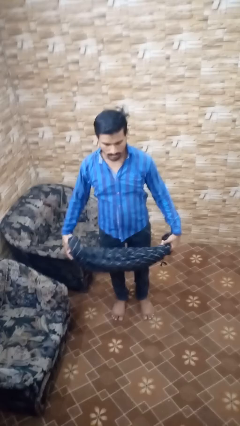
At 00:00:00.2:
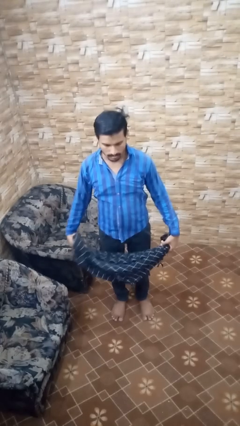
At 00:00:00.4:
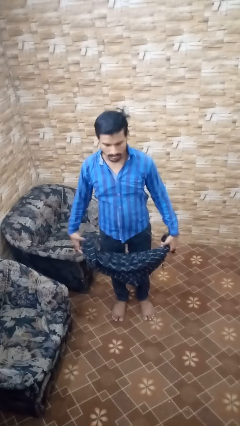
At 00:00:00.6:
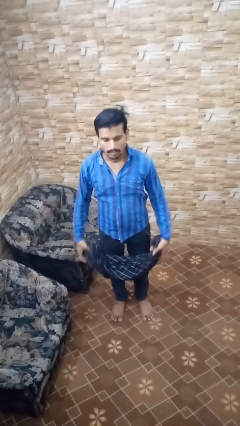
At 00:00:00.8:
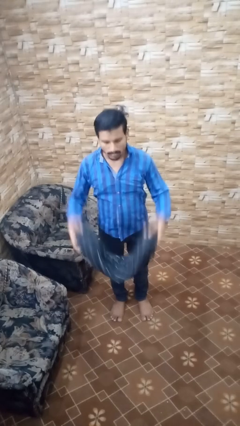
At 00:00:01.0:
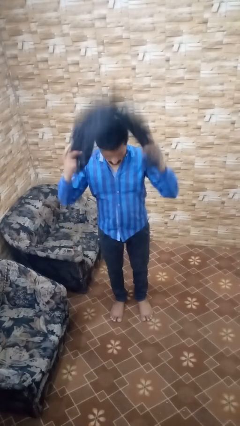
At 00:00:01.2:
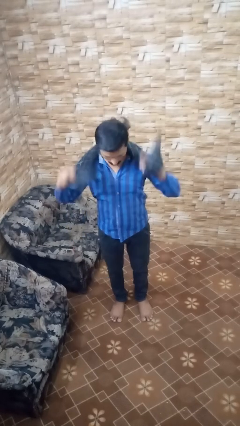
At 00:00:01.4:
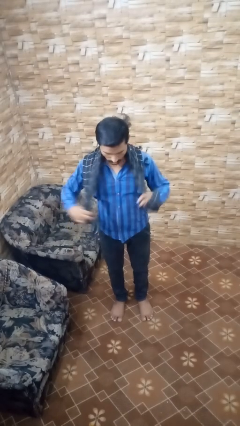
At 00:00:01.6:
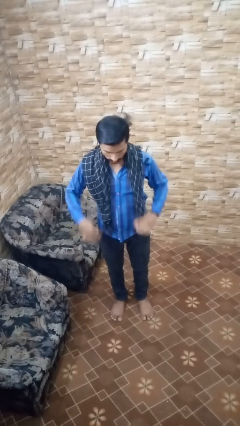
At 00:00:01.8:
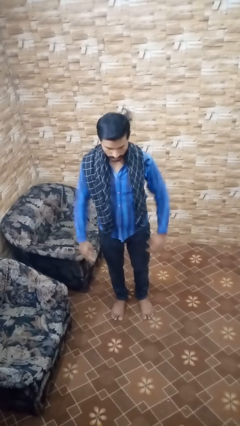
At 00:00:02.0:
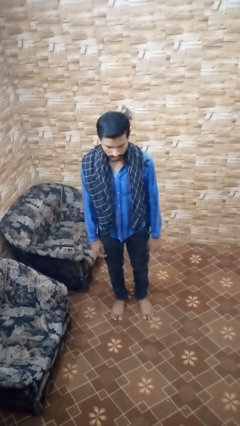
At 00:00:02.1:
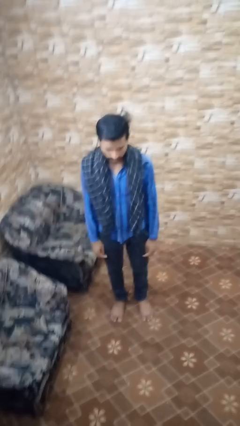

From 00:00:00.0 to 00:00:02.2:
person puts on scarf

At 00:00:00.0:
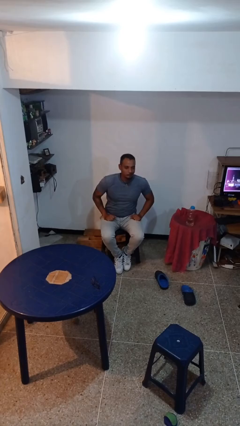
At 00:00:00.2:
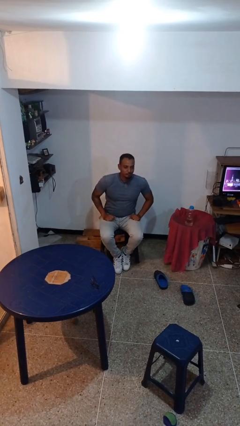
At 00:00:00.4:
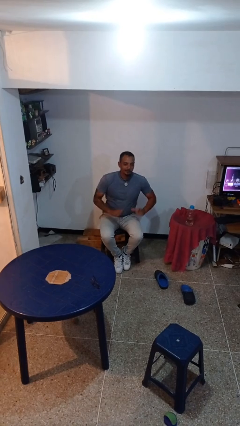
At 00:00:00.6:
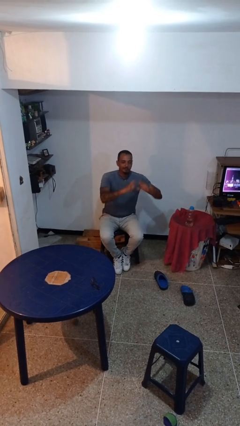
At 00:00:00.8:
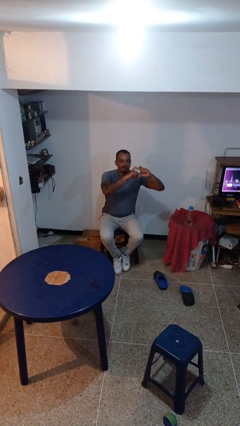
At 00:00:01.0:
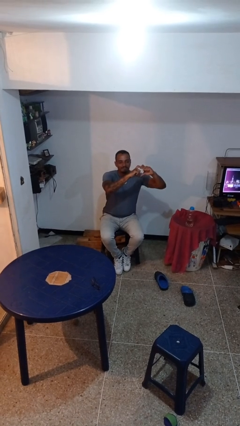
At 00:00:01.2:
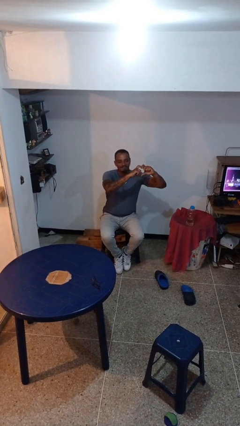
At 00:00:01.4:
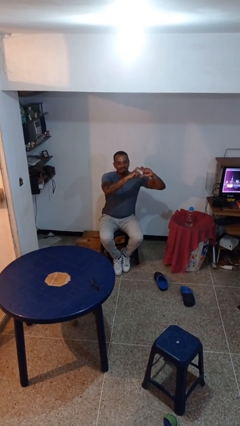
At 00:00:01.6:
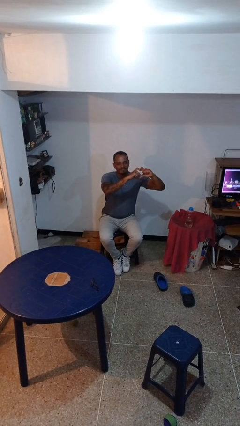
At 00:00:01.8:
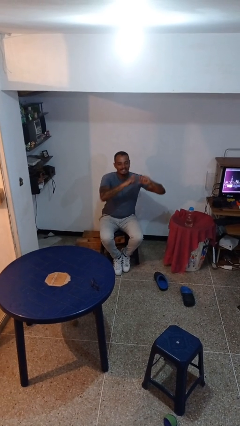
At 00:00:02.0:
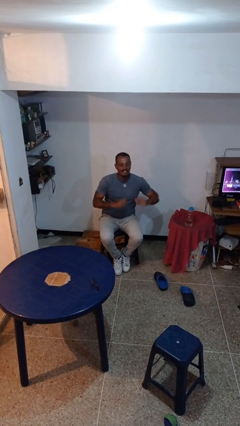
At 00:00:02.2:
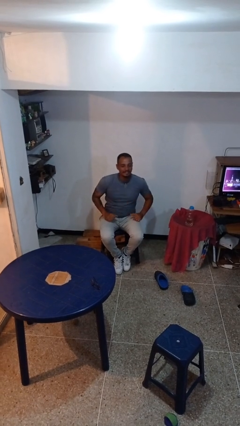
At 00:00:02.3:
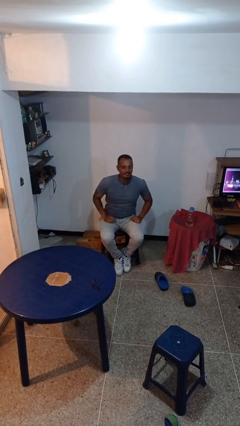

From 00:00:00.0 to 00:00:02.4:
person gestures heart

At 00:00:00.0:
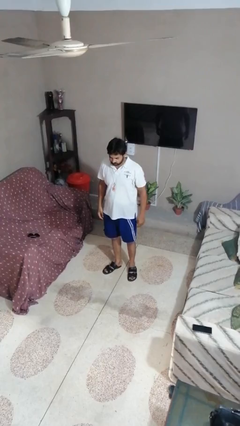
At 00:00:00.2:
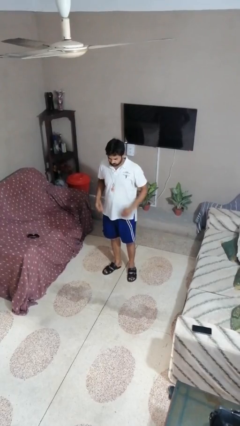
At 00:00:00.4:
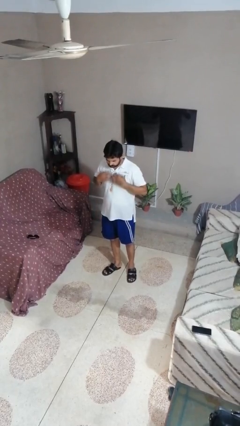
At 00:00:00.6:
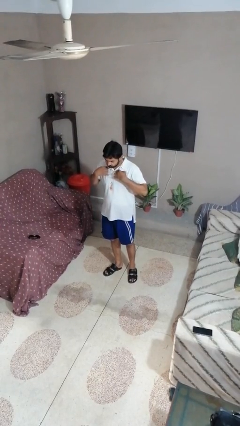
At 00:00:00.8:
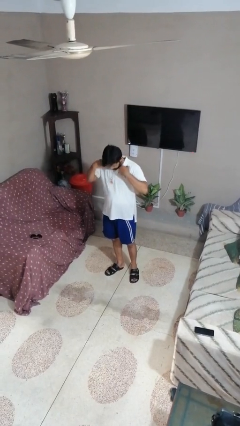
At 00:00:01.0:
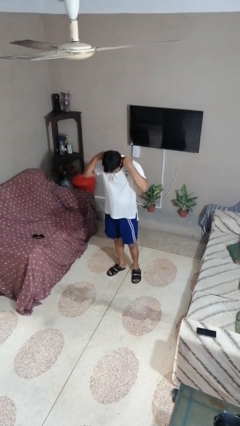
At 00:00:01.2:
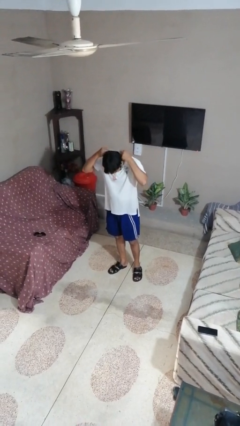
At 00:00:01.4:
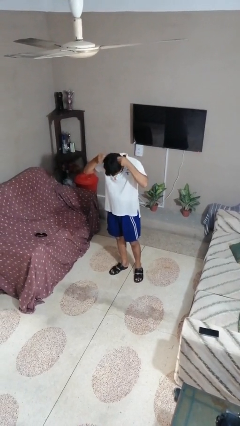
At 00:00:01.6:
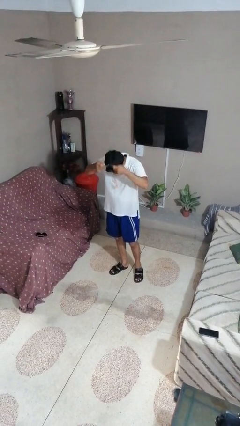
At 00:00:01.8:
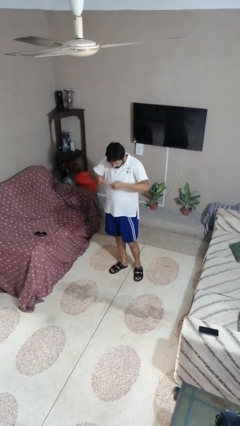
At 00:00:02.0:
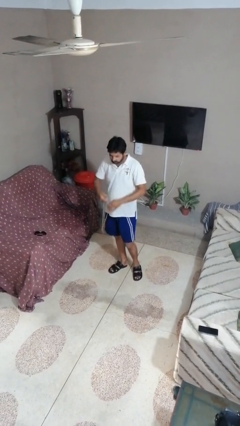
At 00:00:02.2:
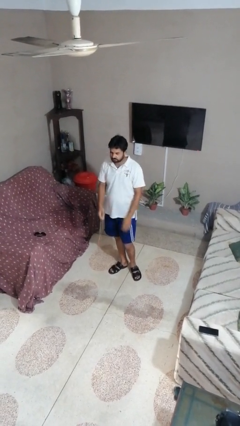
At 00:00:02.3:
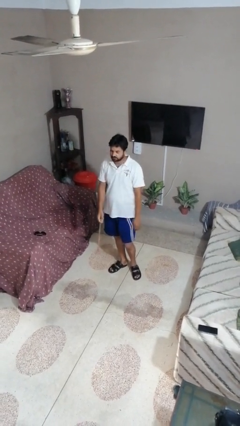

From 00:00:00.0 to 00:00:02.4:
person takes off necklace

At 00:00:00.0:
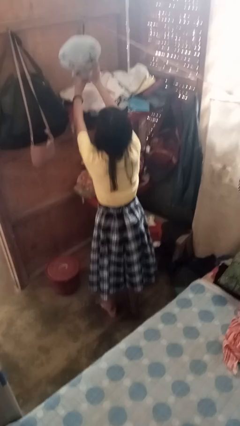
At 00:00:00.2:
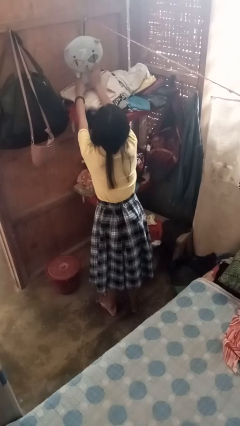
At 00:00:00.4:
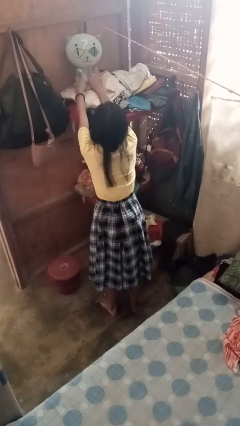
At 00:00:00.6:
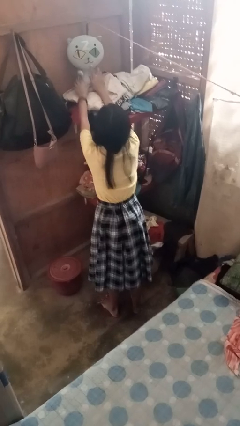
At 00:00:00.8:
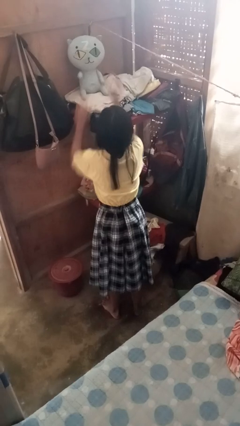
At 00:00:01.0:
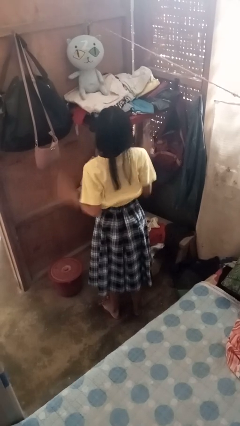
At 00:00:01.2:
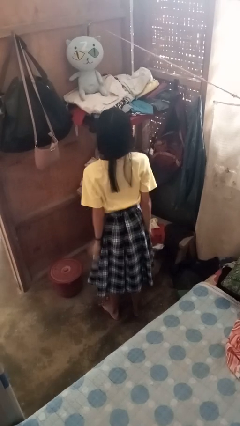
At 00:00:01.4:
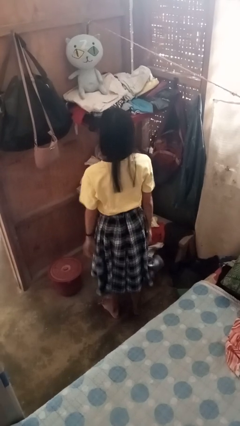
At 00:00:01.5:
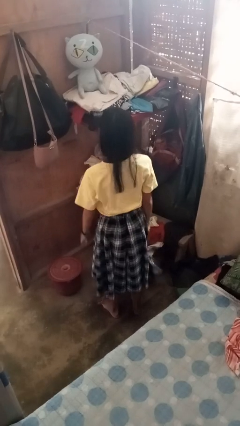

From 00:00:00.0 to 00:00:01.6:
person puts down object on shelf

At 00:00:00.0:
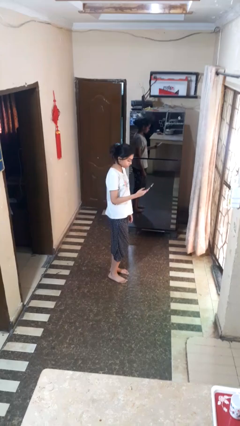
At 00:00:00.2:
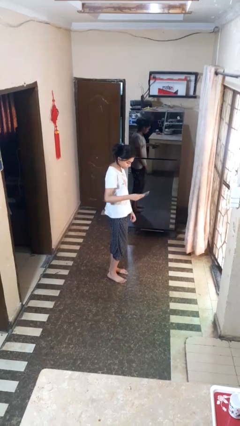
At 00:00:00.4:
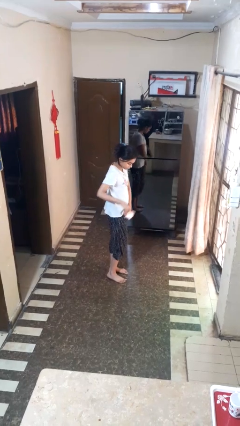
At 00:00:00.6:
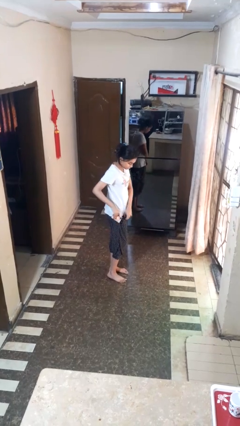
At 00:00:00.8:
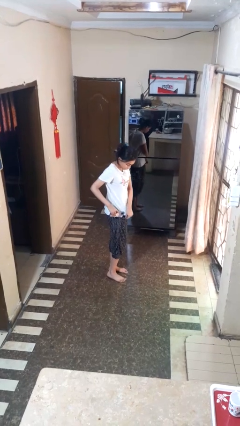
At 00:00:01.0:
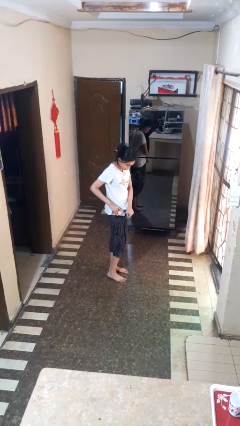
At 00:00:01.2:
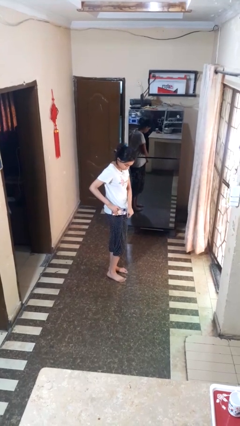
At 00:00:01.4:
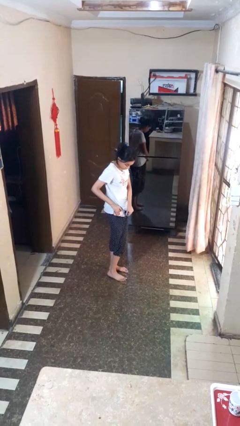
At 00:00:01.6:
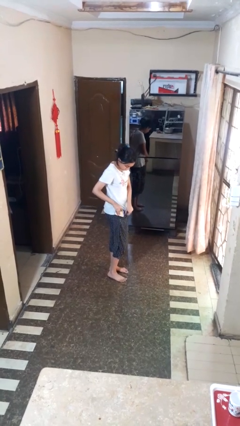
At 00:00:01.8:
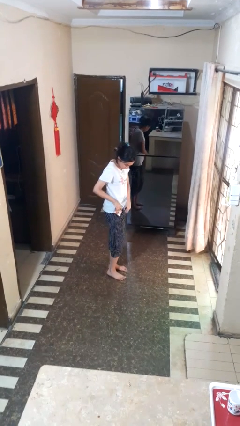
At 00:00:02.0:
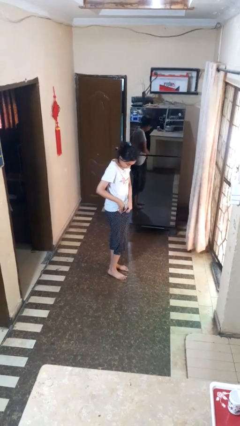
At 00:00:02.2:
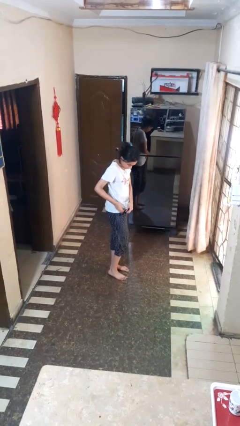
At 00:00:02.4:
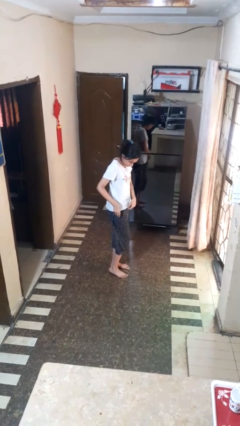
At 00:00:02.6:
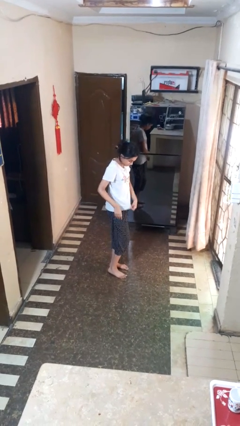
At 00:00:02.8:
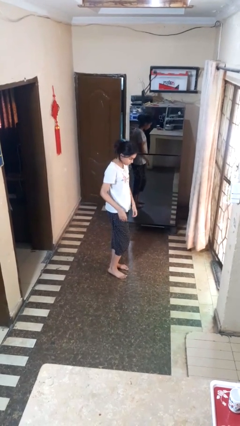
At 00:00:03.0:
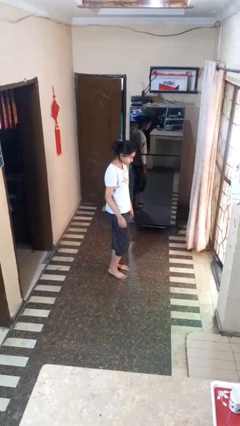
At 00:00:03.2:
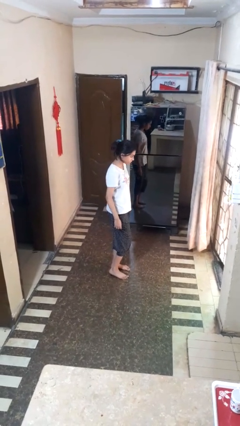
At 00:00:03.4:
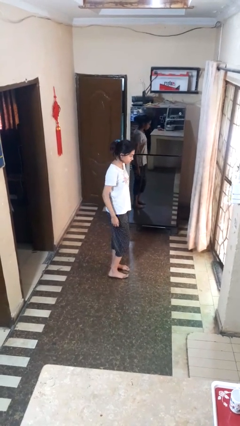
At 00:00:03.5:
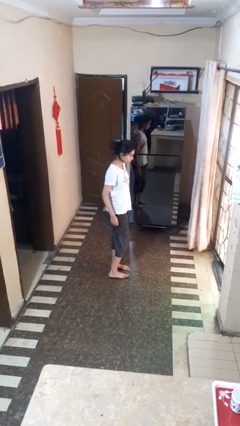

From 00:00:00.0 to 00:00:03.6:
person puts phone into pocket

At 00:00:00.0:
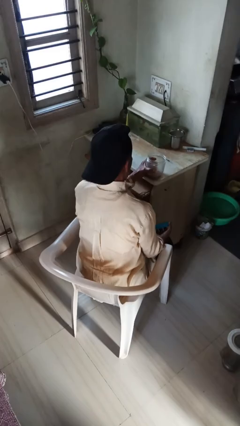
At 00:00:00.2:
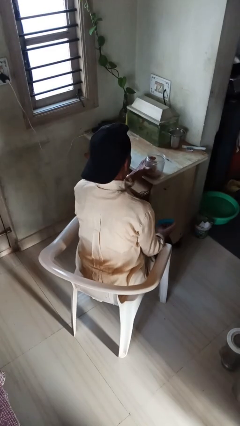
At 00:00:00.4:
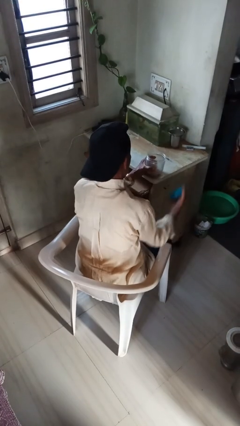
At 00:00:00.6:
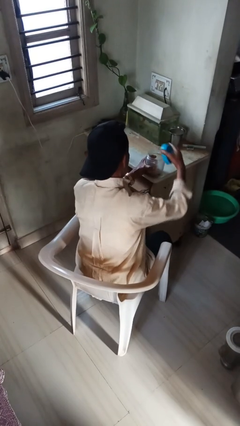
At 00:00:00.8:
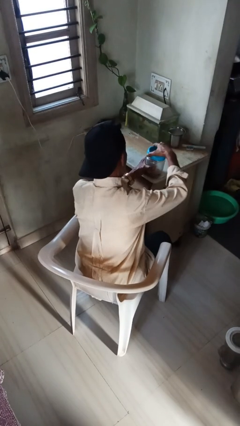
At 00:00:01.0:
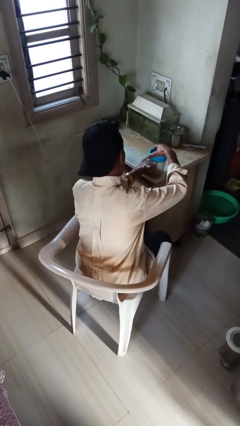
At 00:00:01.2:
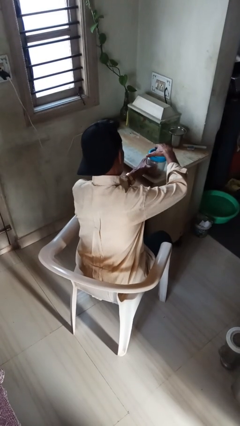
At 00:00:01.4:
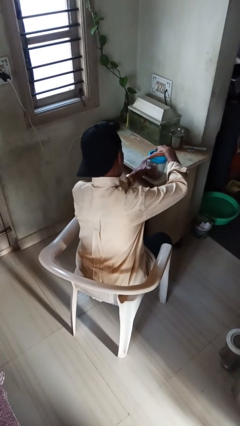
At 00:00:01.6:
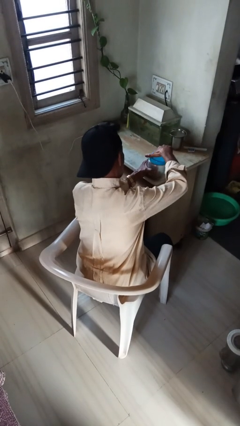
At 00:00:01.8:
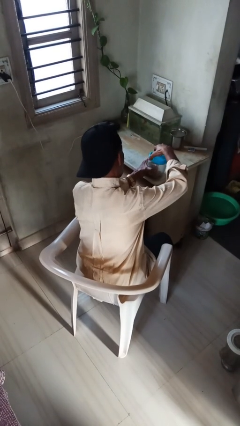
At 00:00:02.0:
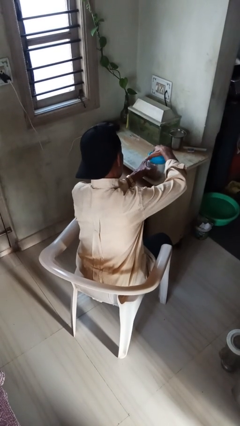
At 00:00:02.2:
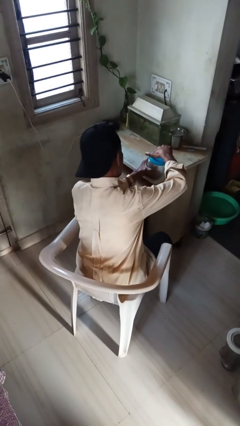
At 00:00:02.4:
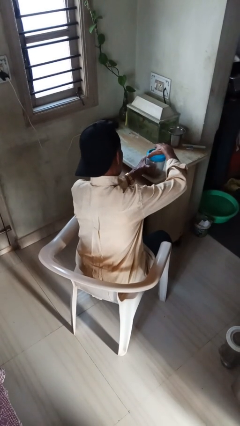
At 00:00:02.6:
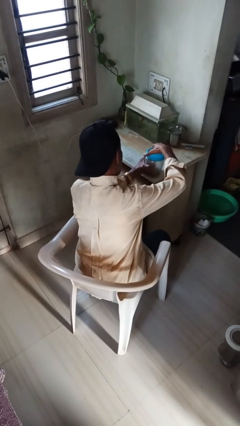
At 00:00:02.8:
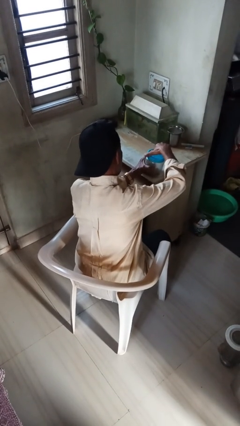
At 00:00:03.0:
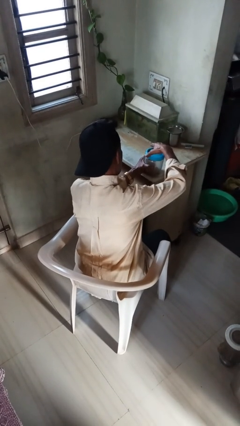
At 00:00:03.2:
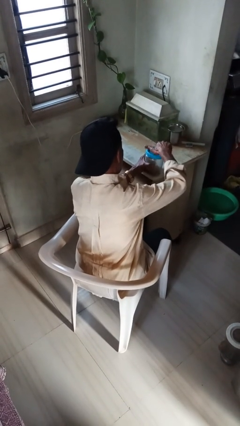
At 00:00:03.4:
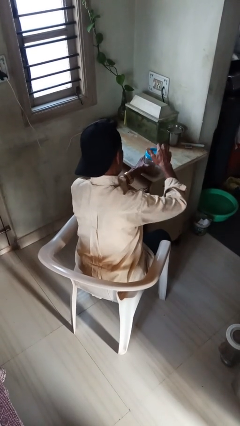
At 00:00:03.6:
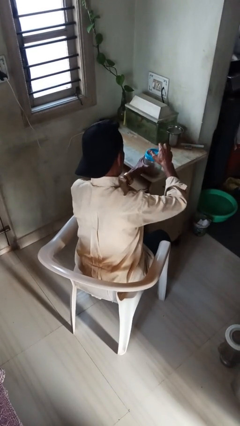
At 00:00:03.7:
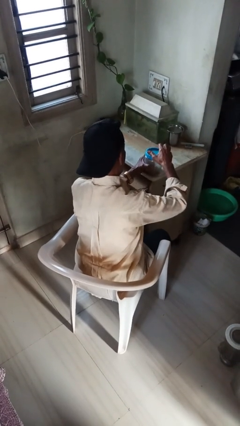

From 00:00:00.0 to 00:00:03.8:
person closes jar

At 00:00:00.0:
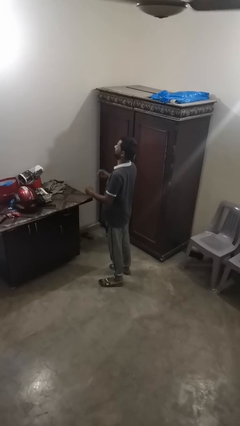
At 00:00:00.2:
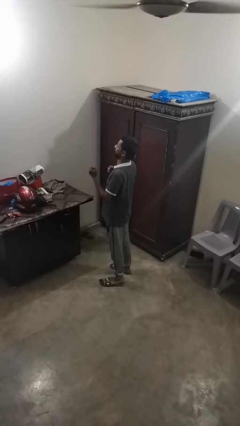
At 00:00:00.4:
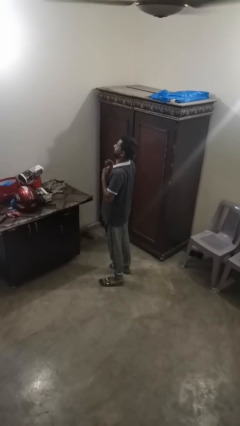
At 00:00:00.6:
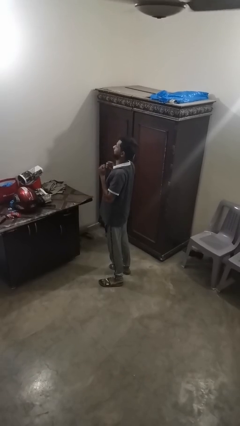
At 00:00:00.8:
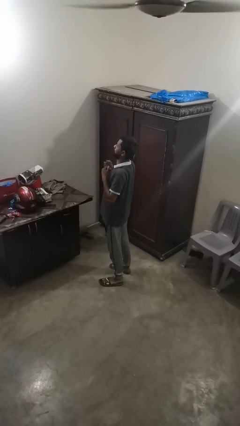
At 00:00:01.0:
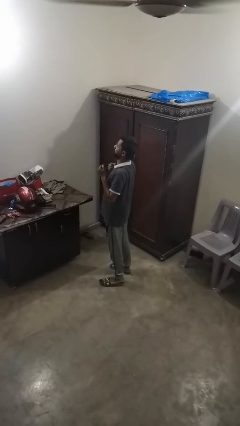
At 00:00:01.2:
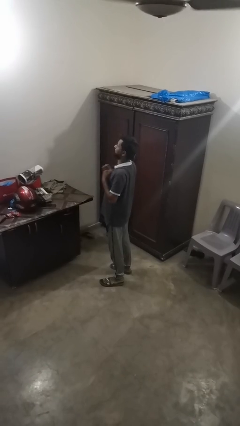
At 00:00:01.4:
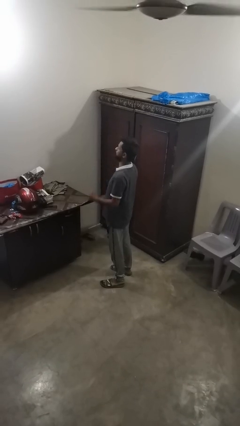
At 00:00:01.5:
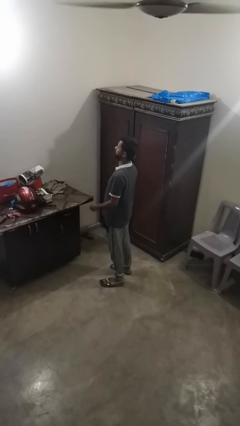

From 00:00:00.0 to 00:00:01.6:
person drums on chest
